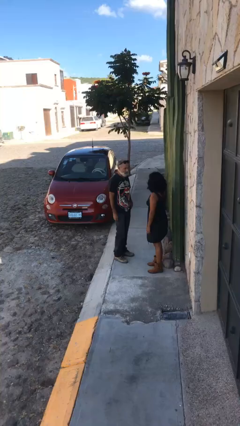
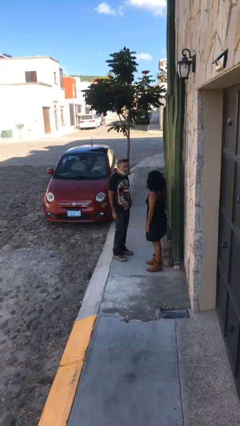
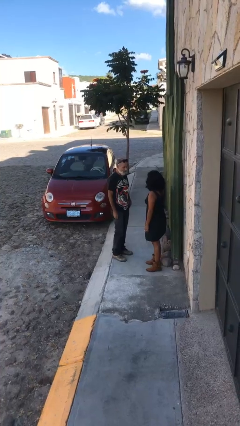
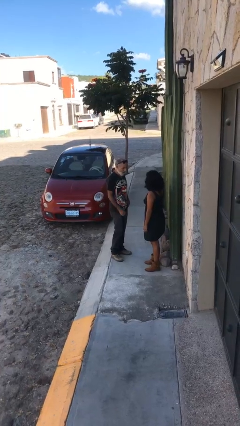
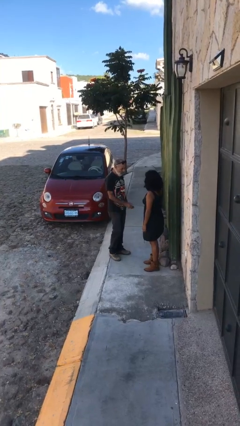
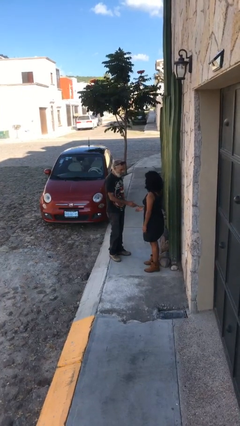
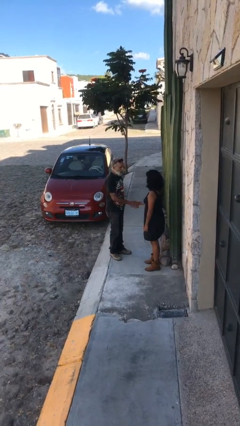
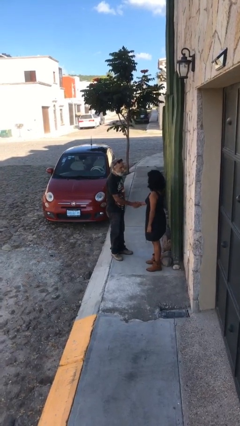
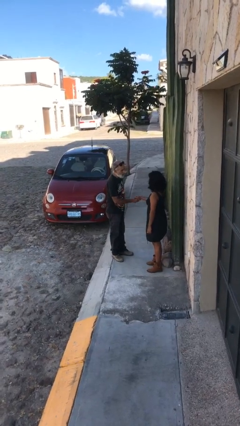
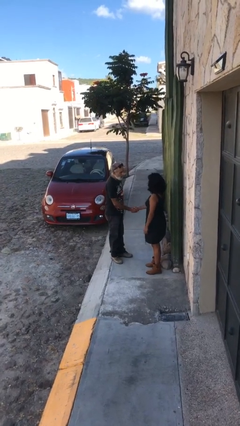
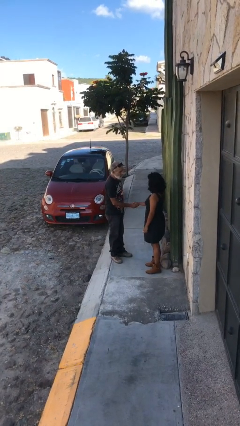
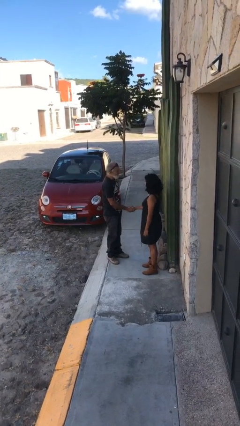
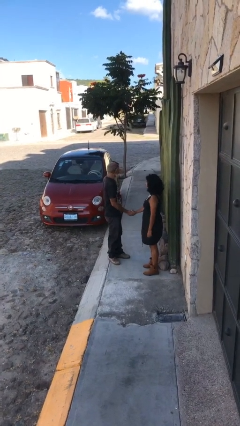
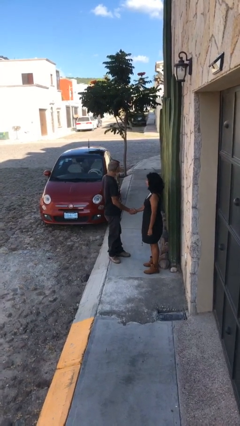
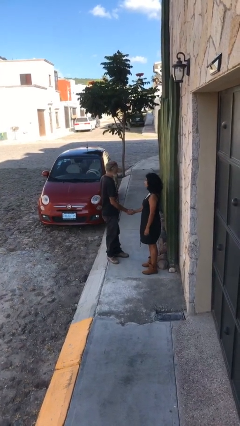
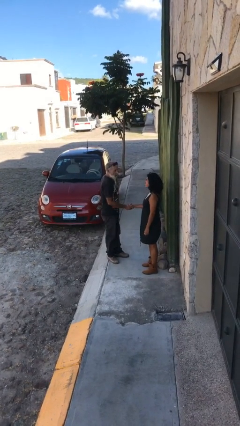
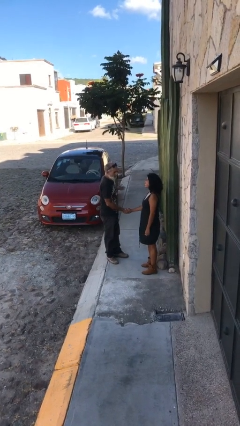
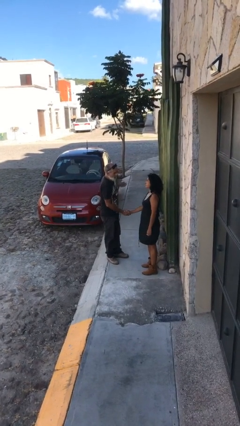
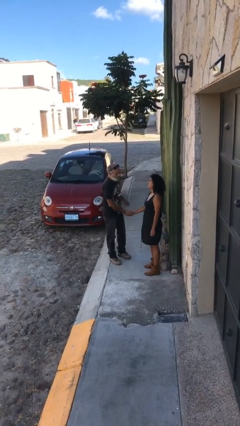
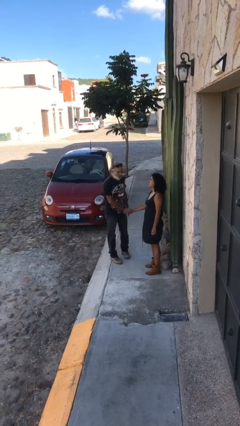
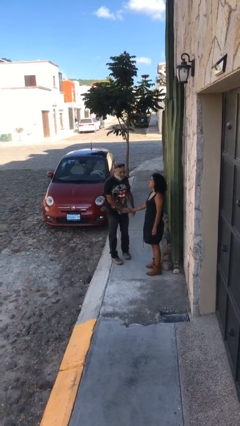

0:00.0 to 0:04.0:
person shakes hand

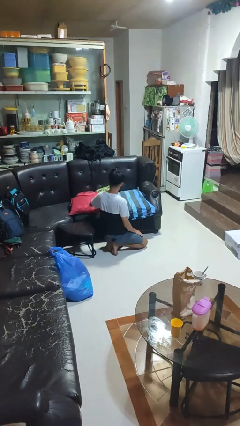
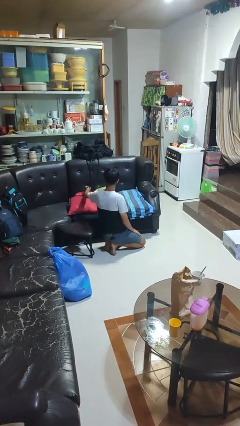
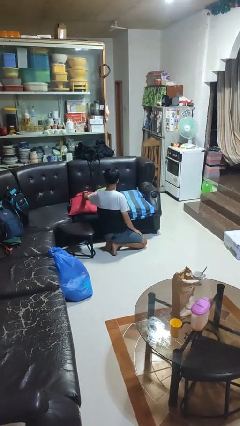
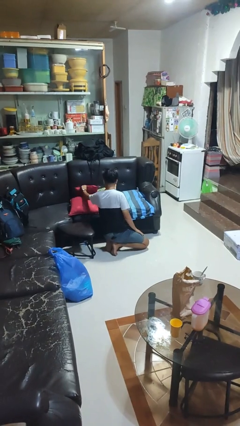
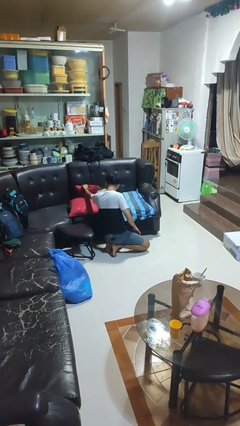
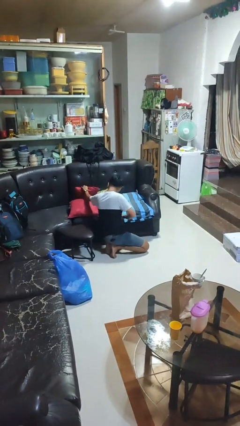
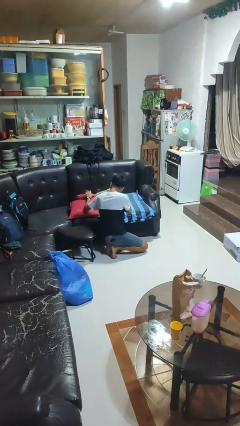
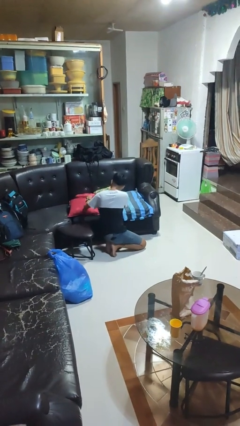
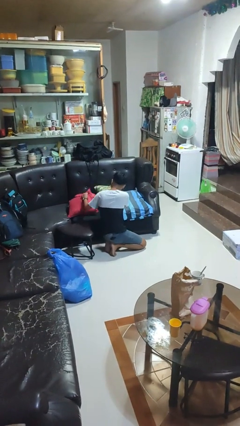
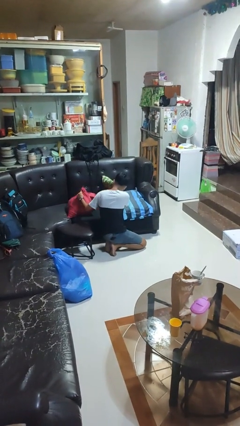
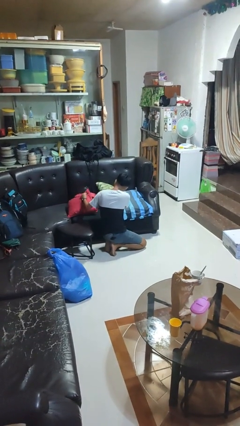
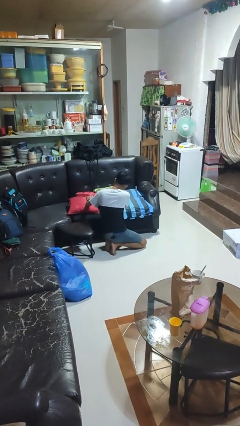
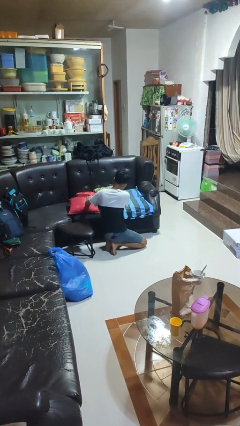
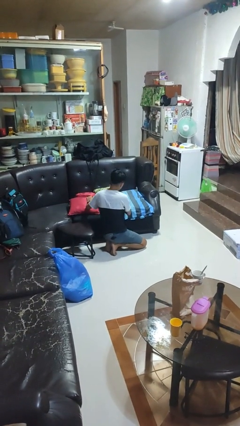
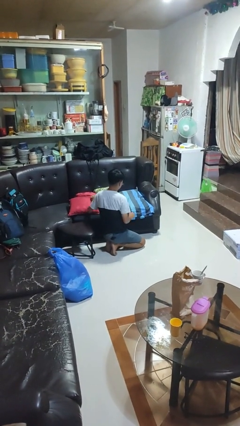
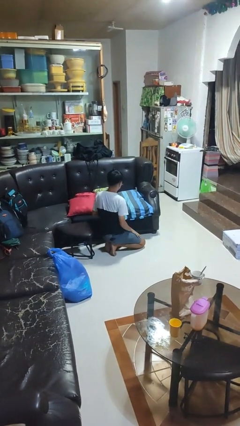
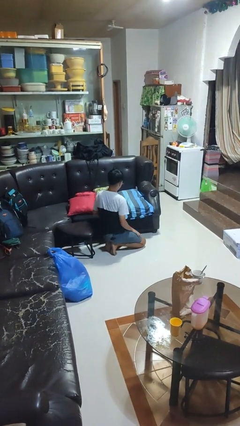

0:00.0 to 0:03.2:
person searches in couch

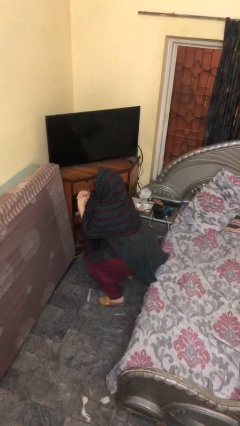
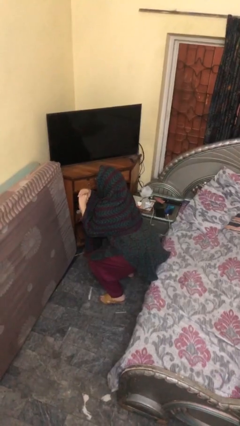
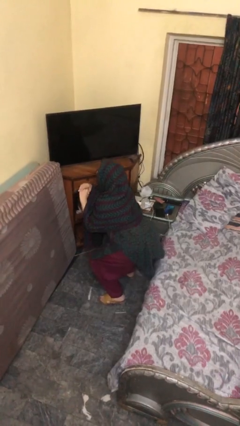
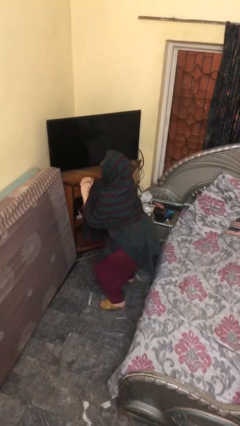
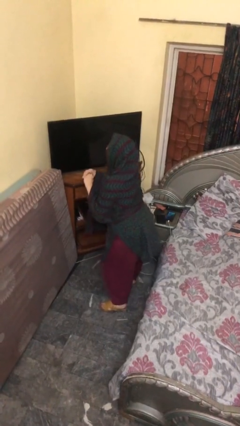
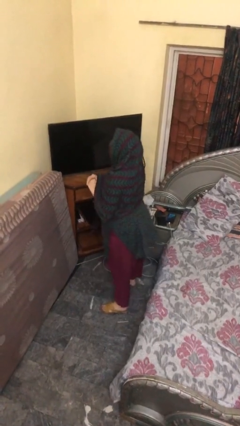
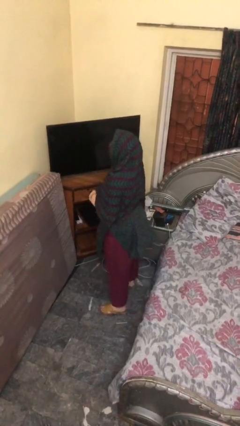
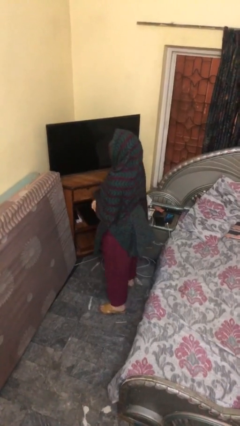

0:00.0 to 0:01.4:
person stands up

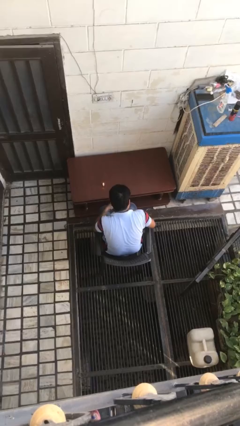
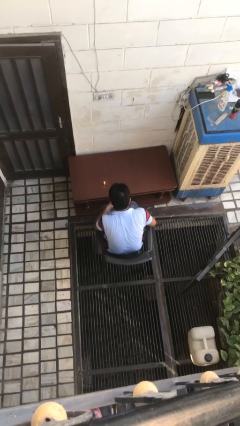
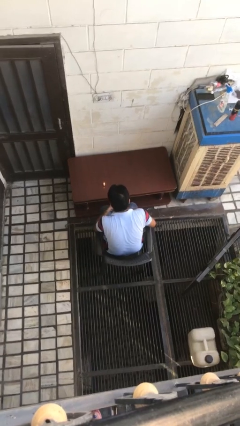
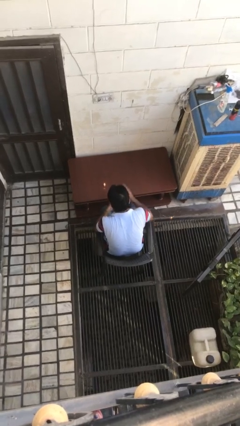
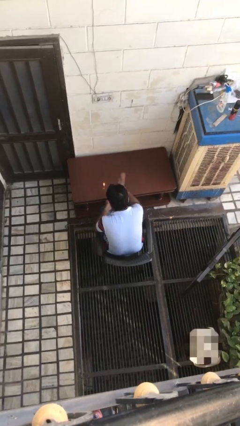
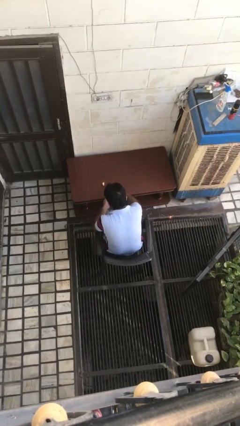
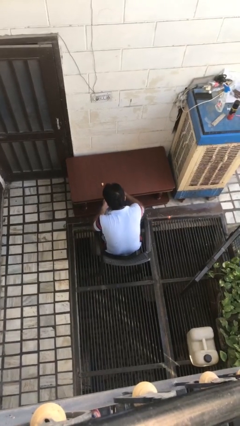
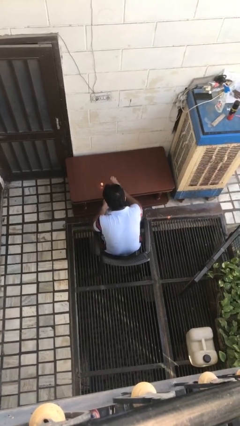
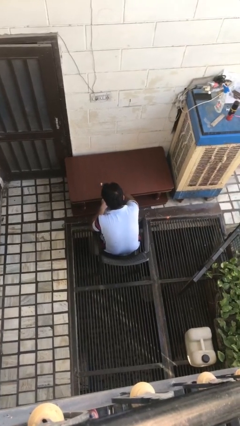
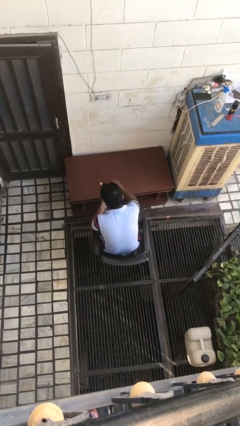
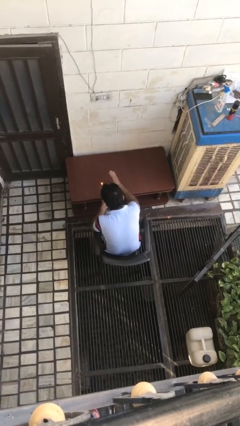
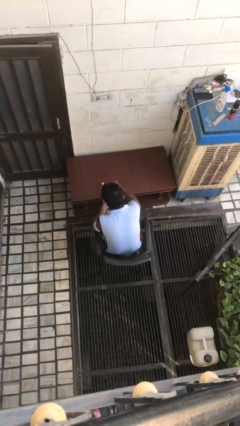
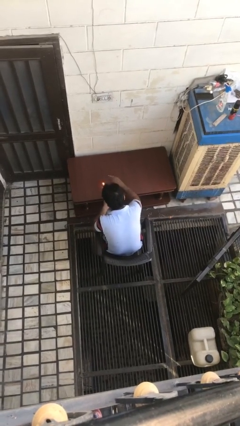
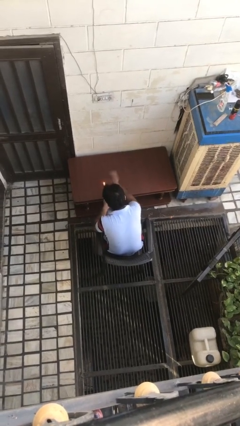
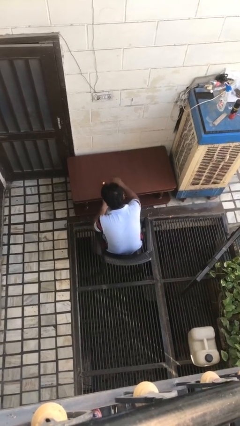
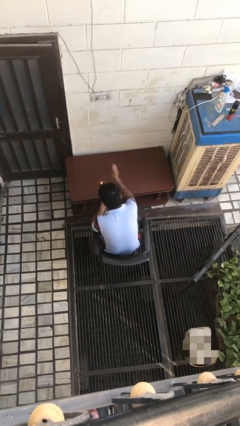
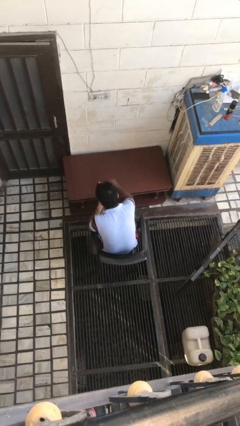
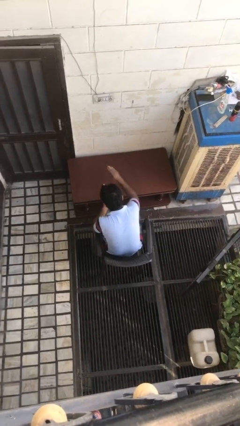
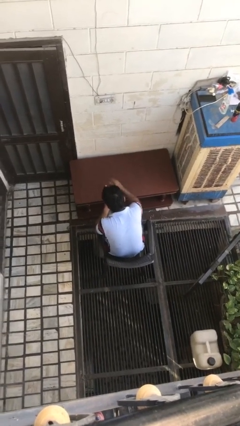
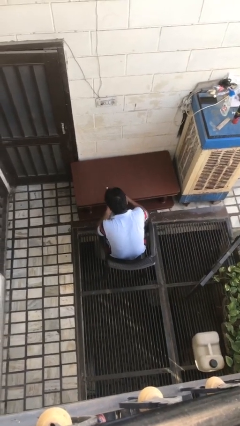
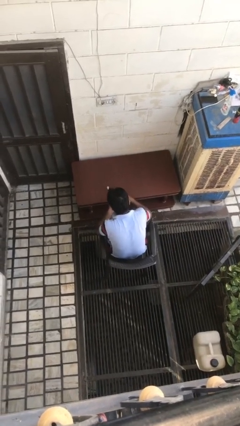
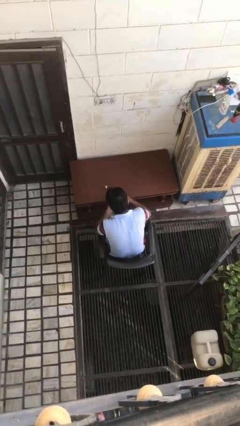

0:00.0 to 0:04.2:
person extinguishes candle

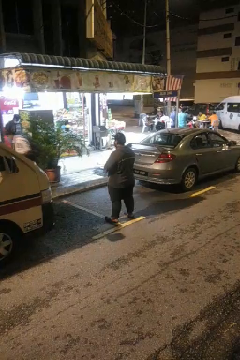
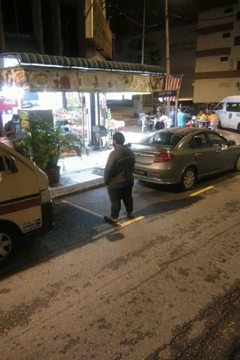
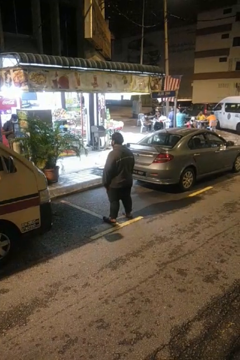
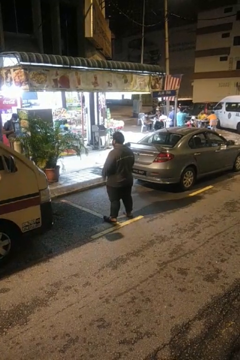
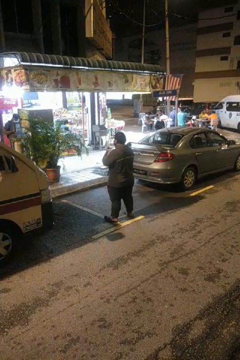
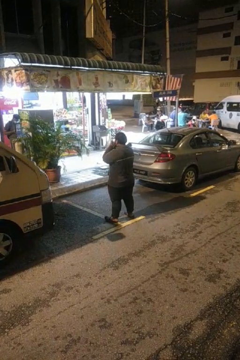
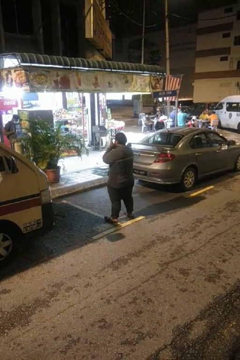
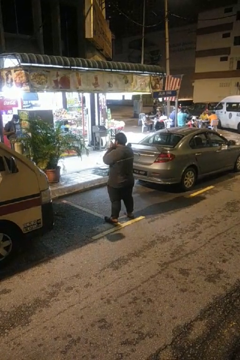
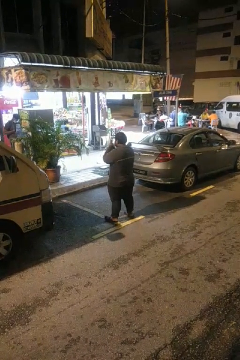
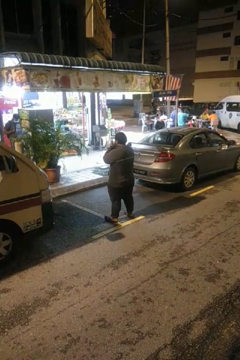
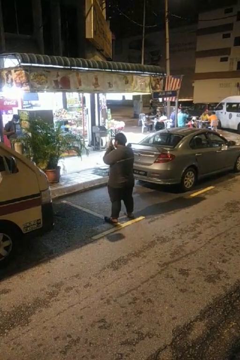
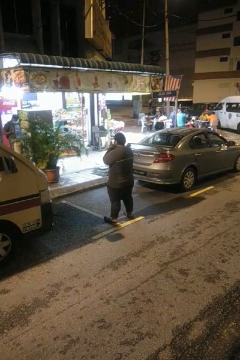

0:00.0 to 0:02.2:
person blows into hands

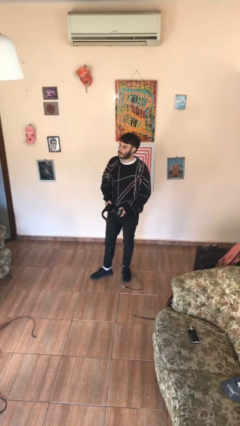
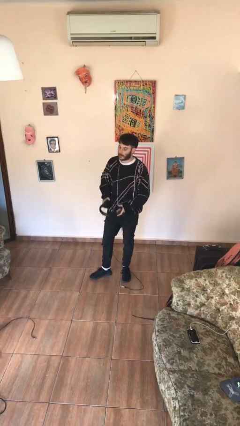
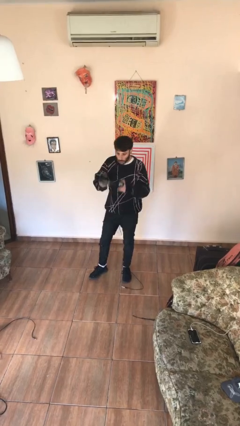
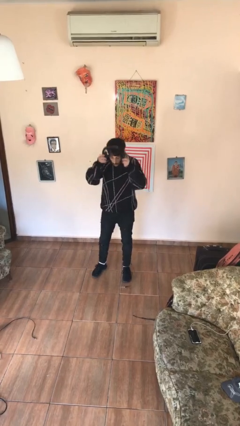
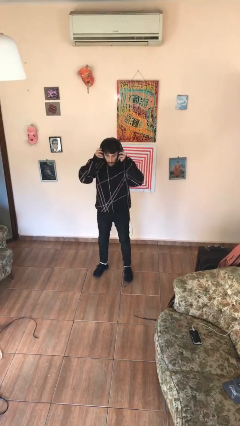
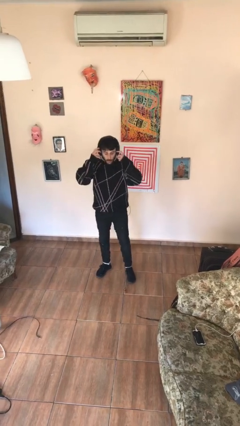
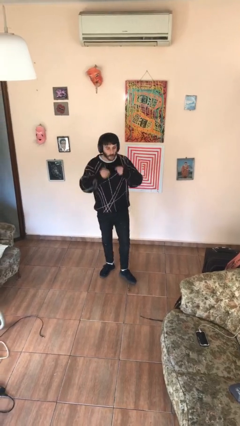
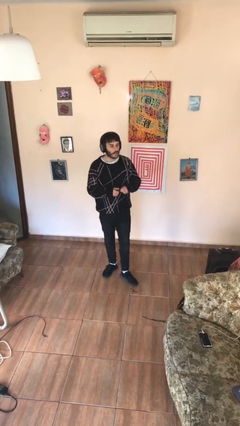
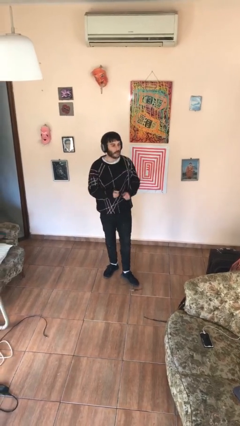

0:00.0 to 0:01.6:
person puts on headphones

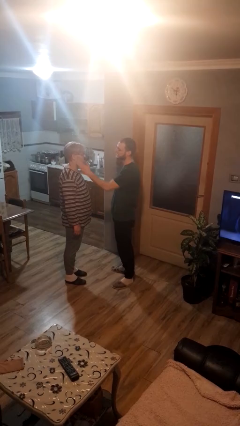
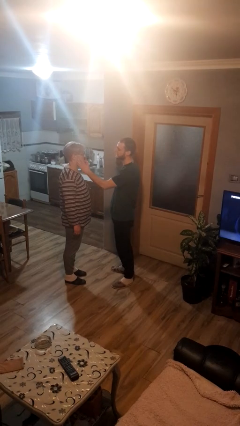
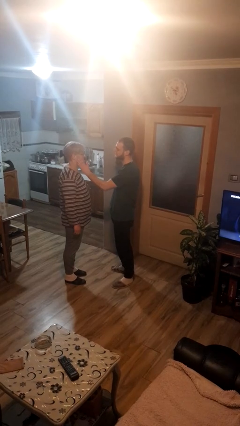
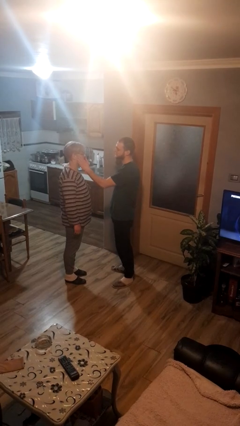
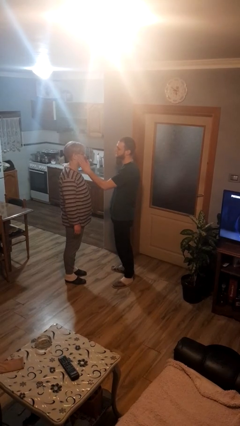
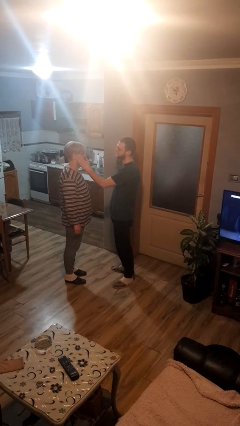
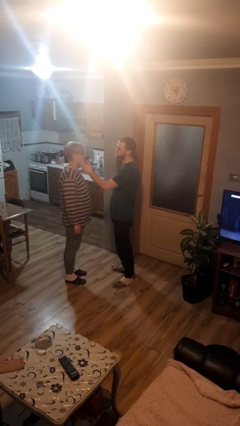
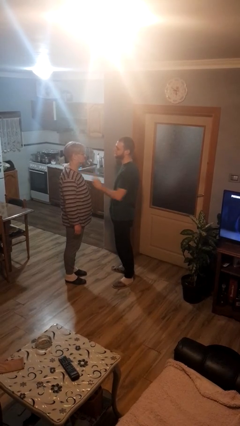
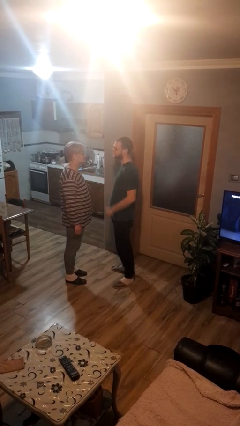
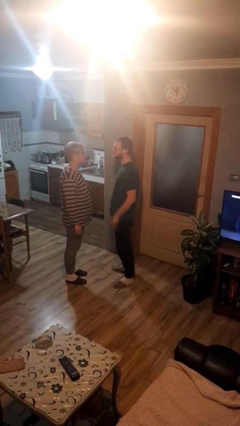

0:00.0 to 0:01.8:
person touches face of person
